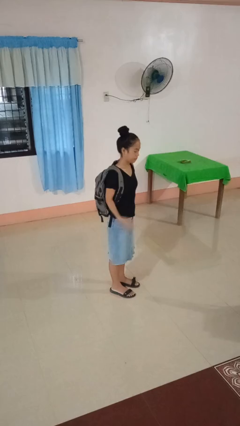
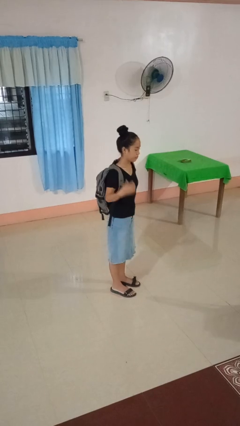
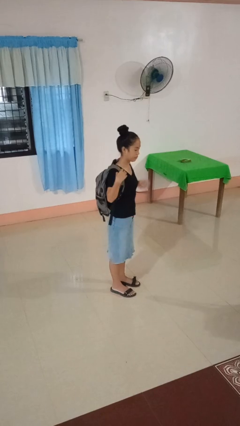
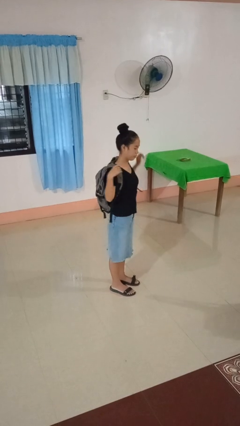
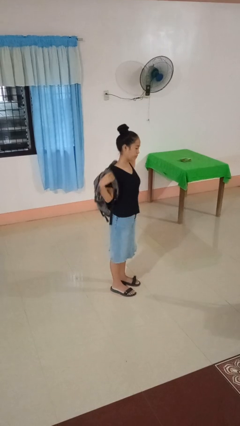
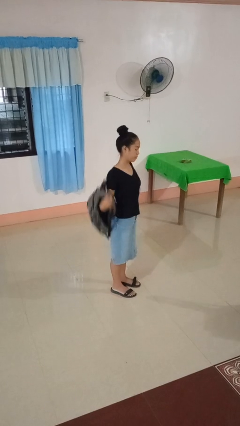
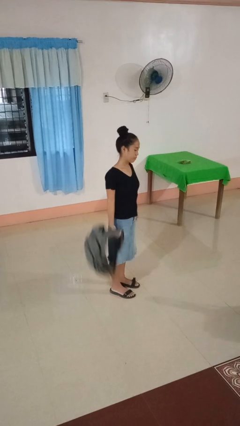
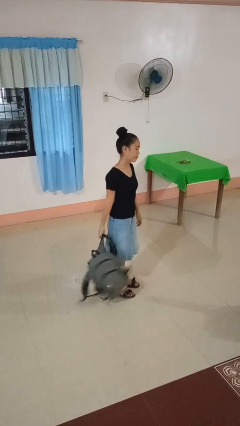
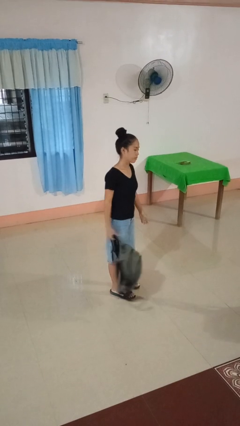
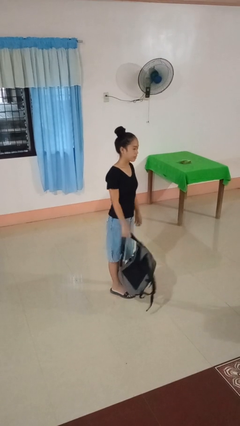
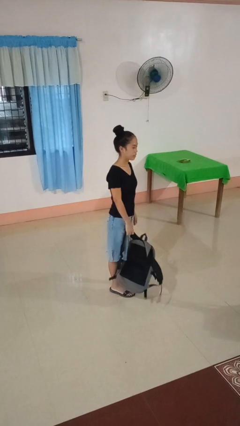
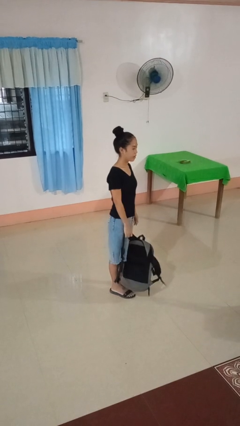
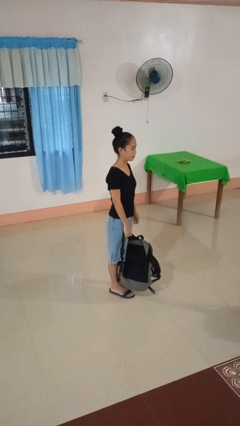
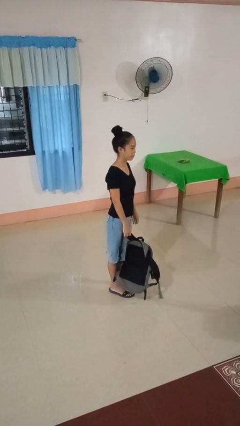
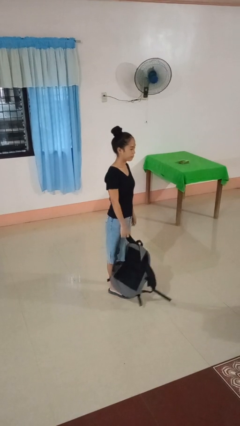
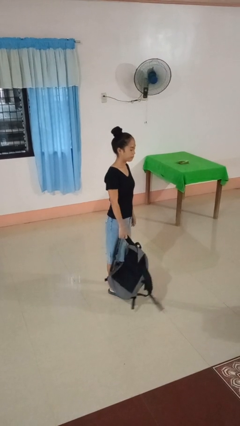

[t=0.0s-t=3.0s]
person takes off backpack

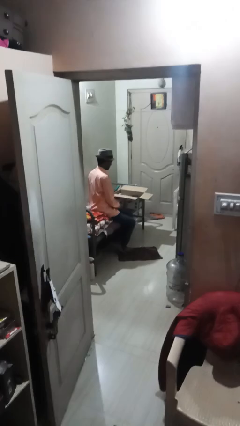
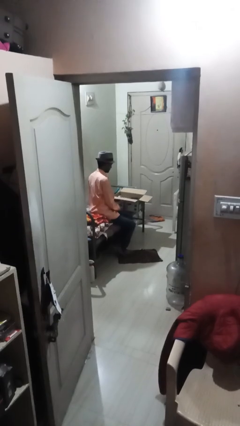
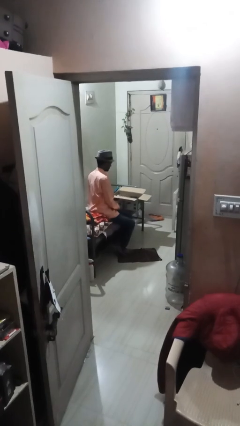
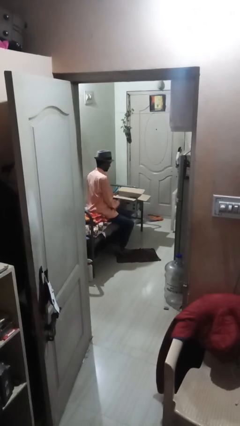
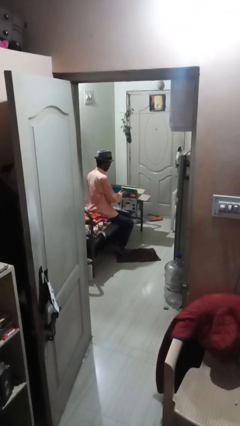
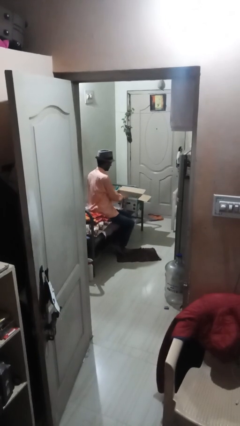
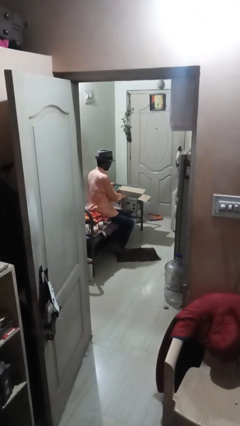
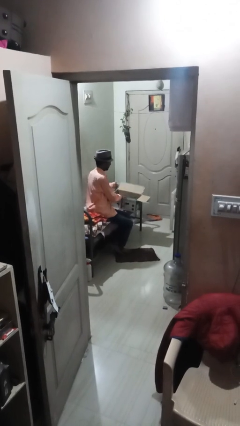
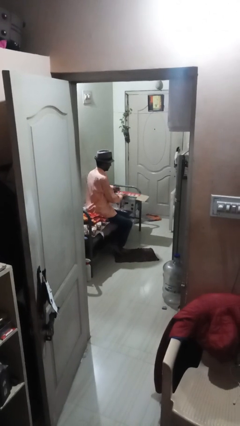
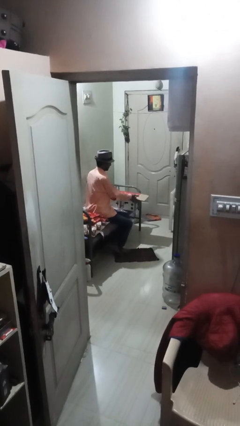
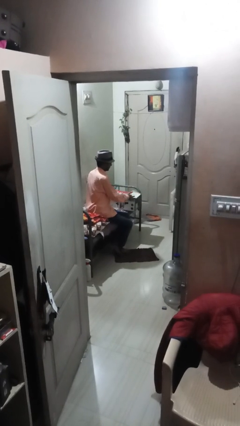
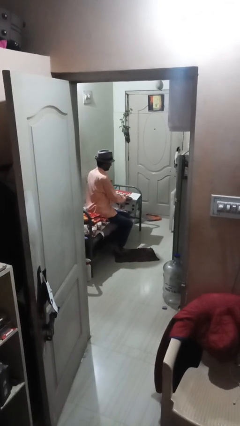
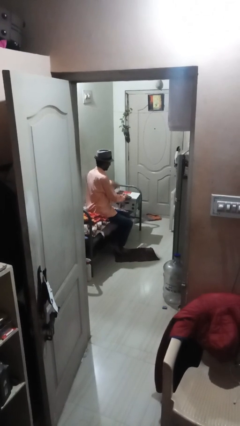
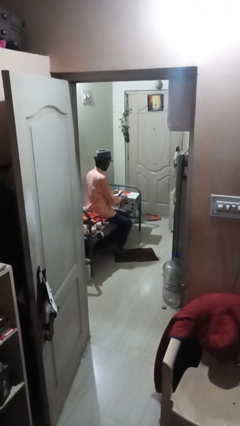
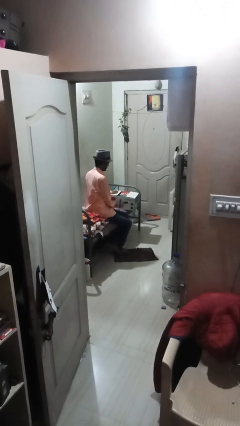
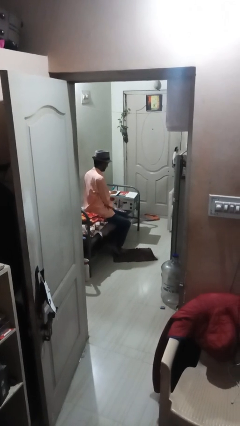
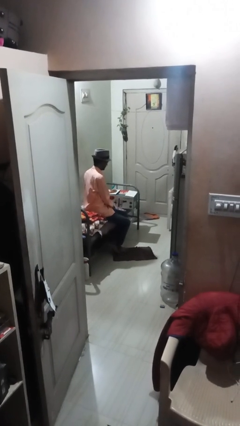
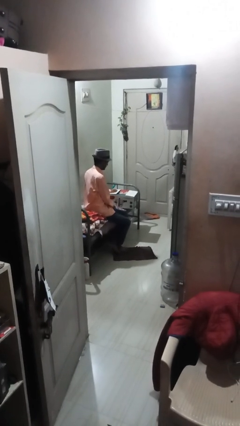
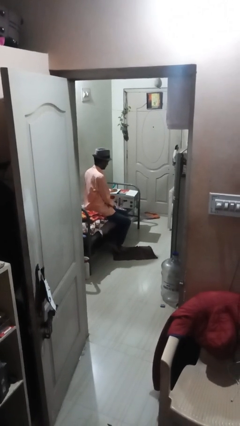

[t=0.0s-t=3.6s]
person closes box

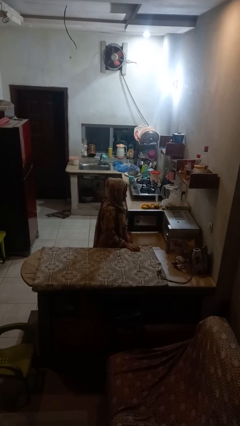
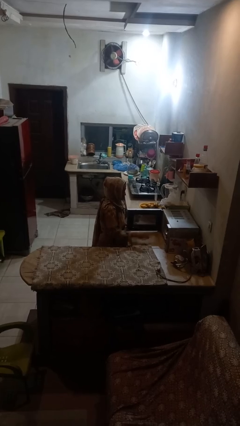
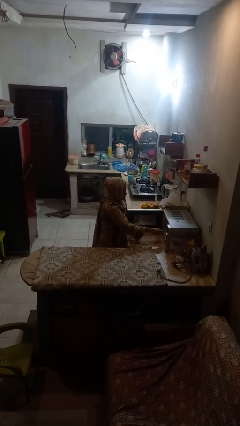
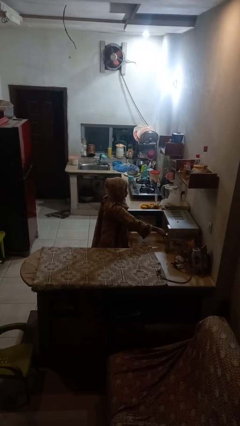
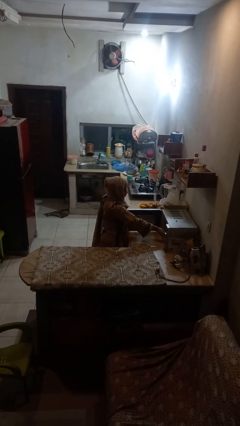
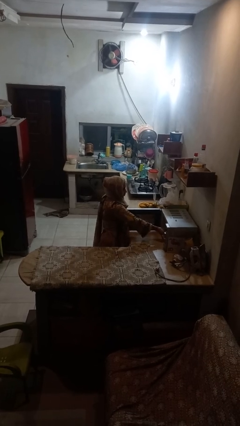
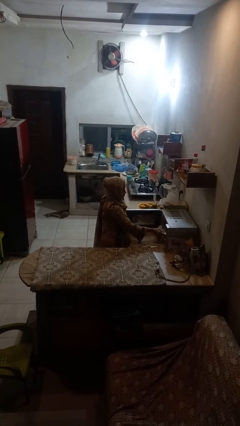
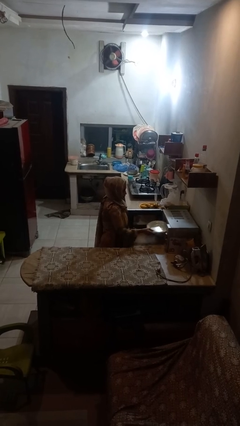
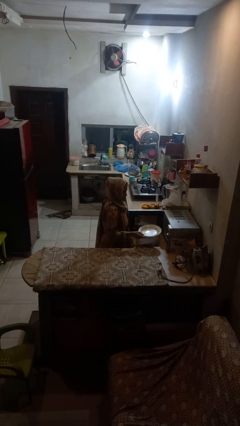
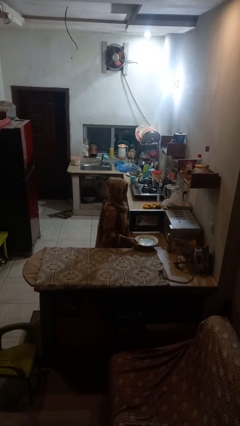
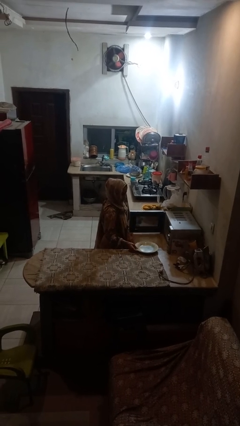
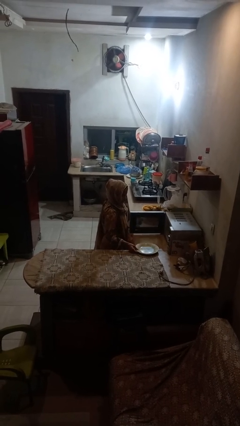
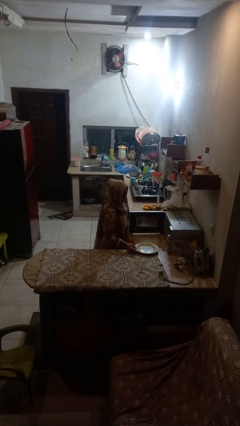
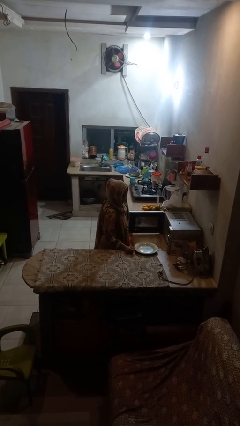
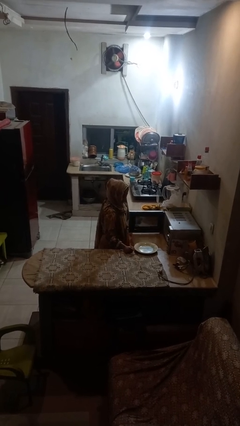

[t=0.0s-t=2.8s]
person takes object from microwave

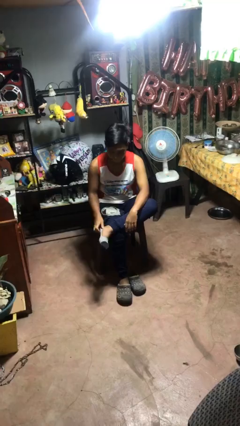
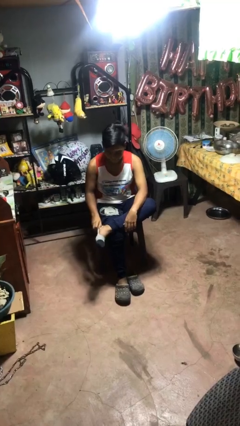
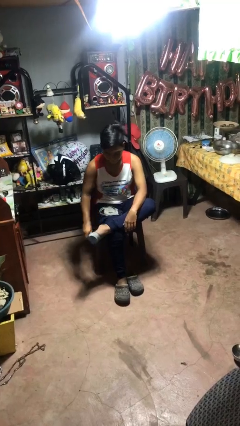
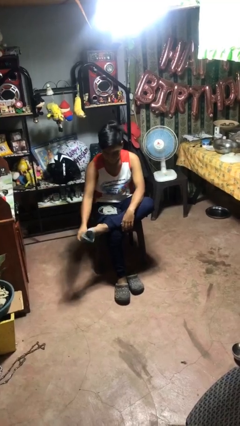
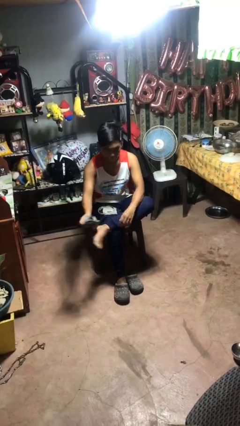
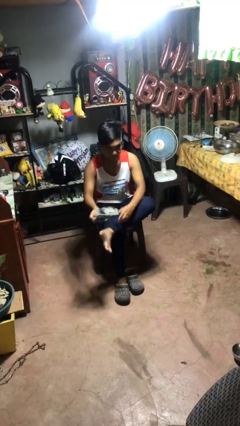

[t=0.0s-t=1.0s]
person takes off socks

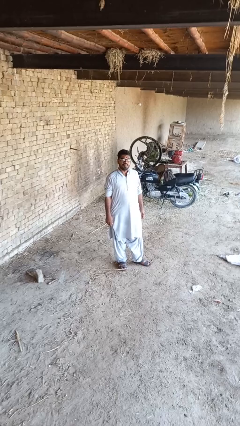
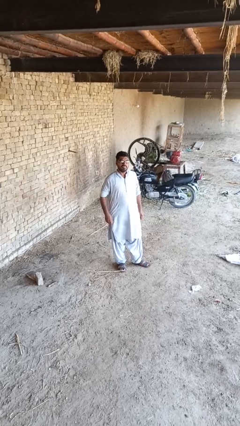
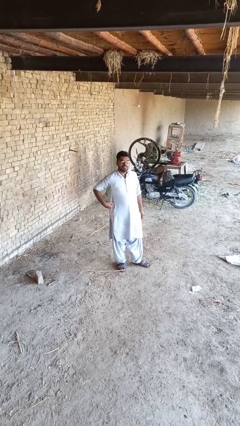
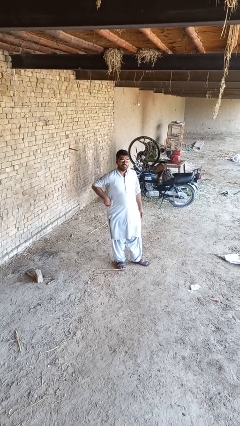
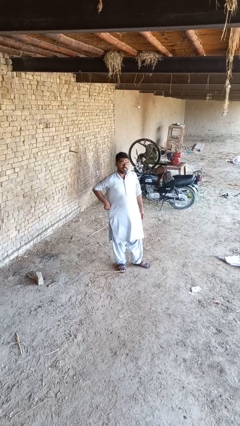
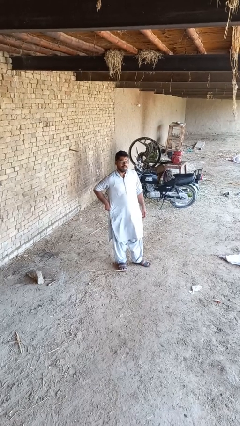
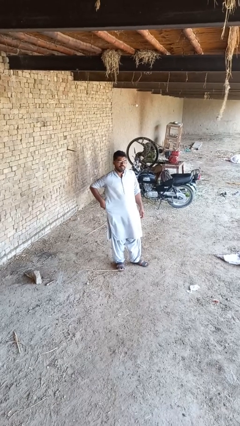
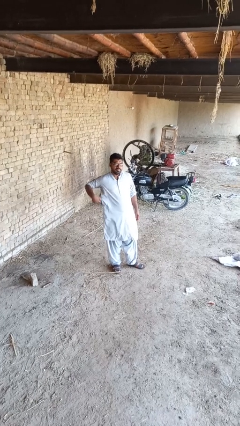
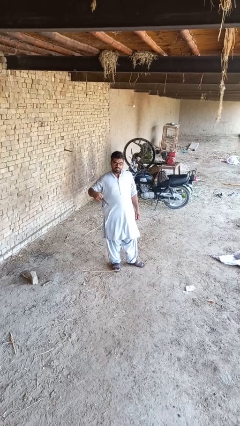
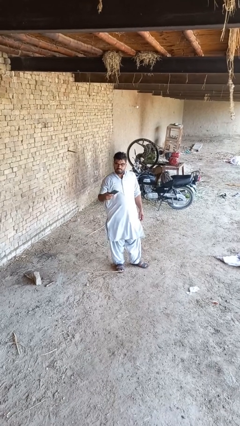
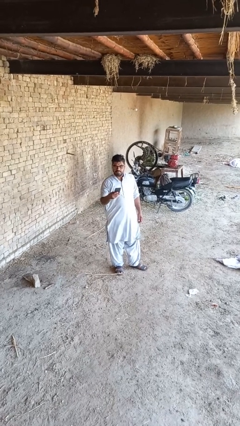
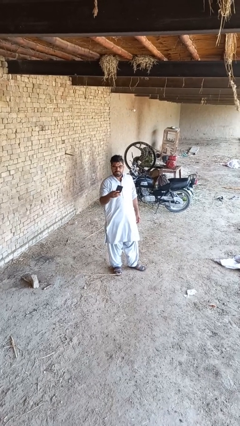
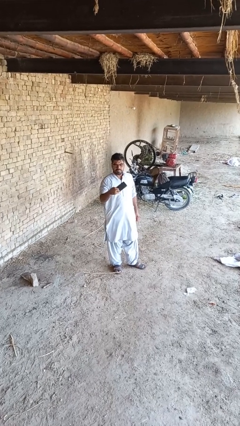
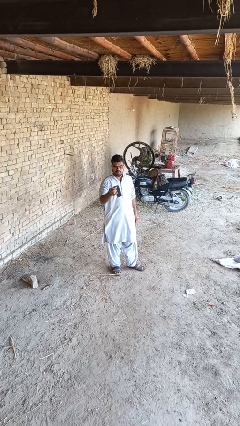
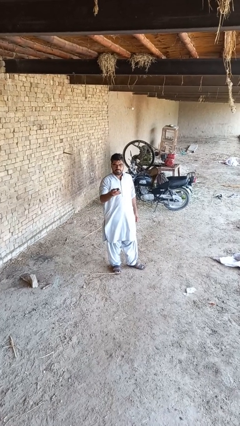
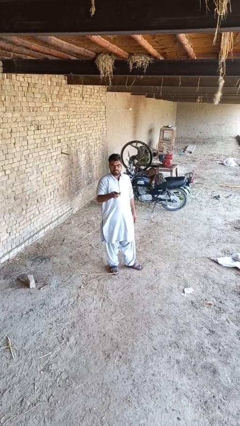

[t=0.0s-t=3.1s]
person takes phone from pocket

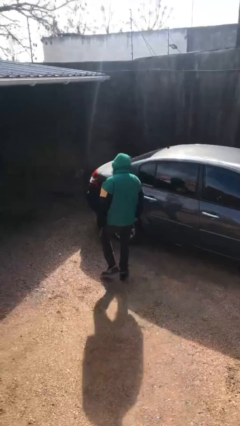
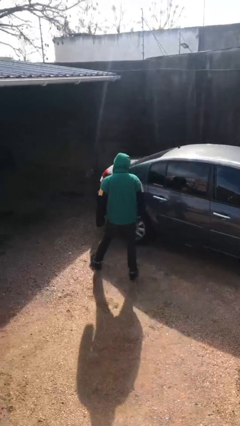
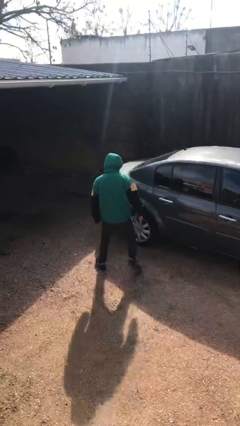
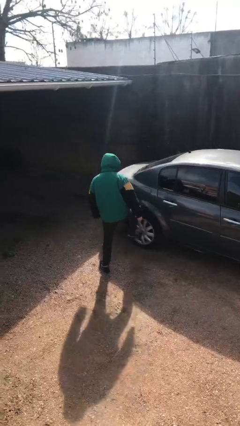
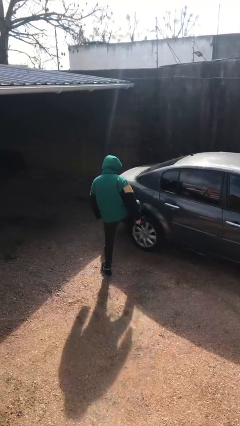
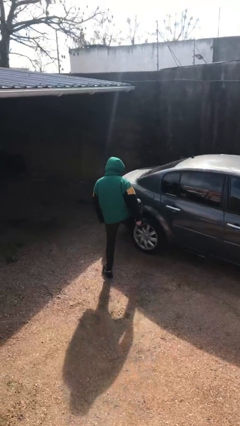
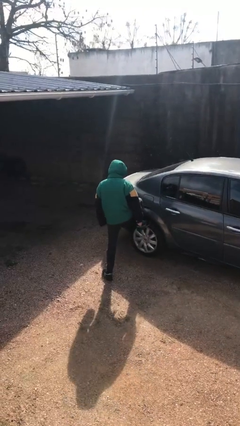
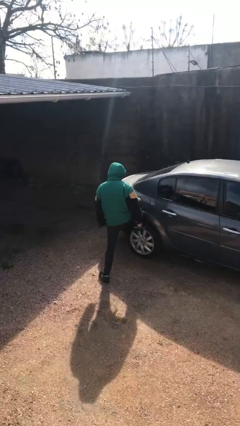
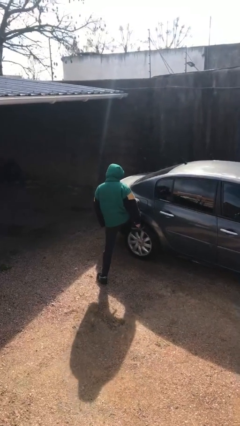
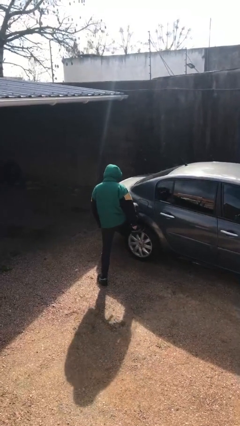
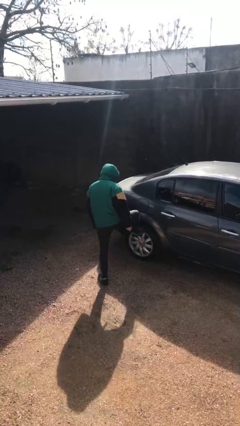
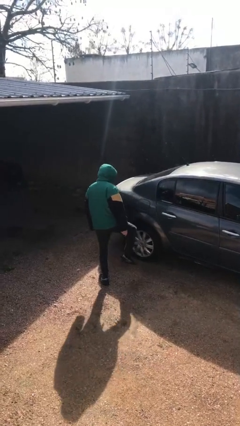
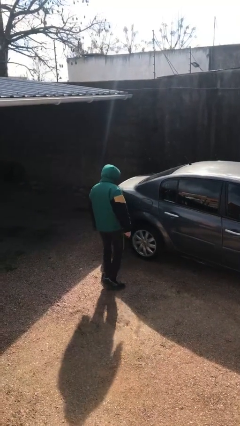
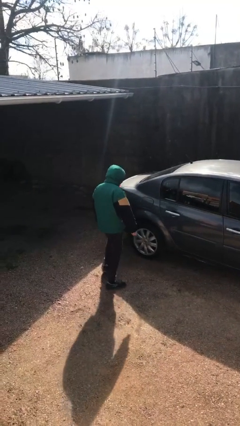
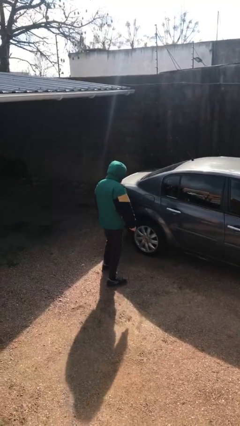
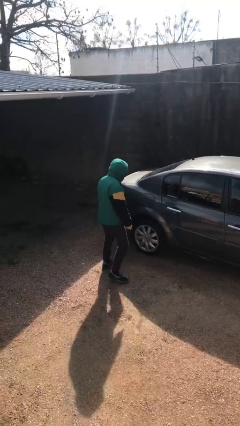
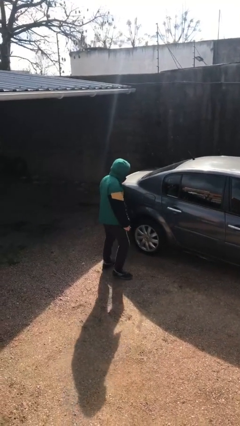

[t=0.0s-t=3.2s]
person kicks car tires

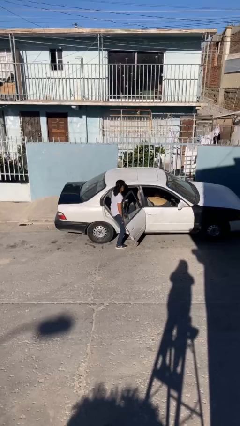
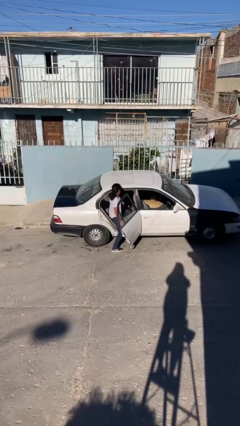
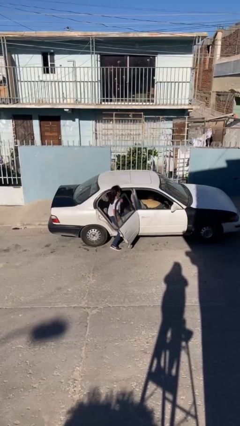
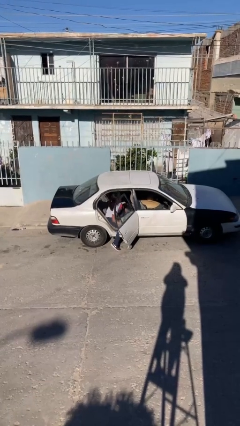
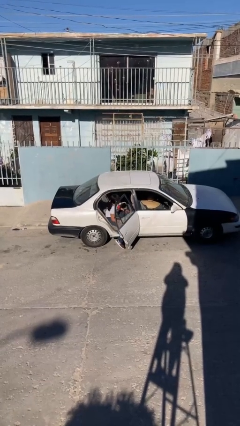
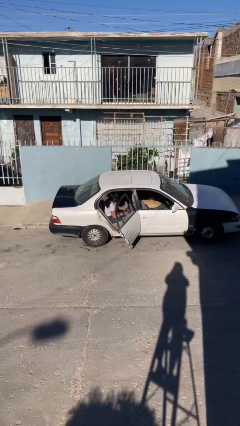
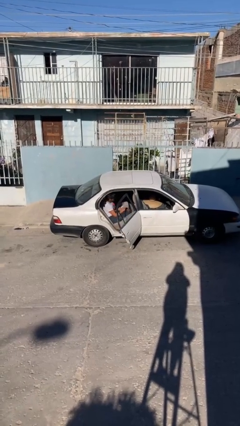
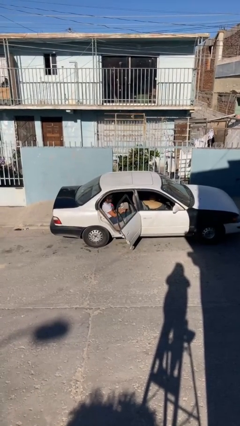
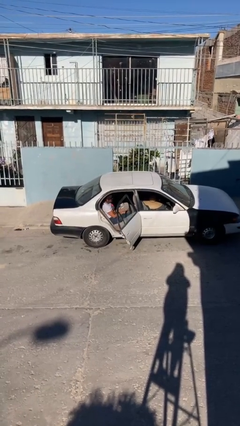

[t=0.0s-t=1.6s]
person enters car
